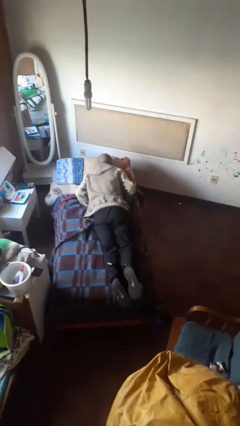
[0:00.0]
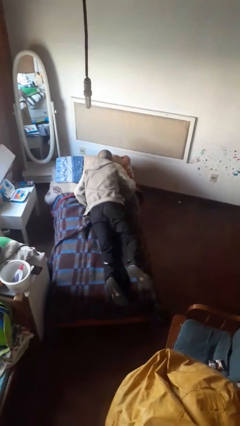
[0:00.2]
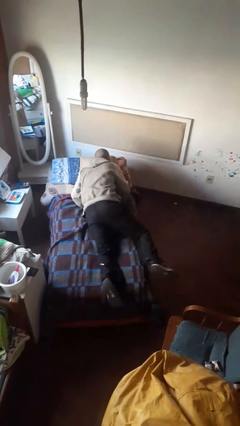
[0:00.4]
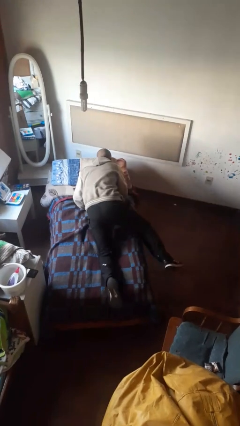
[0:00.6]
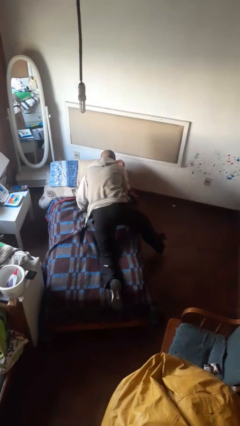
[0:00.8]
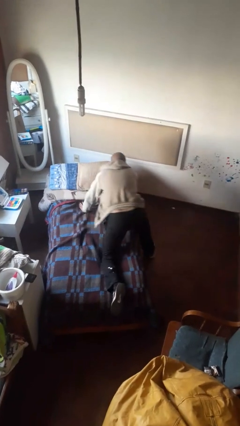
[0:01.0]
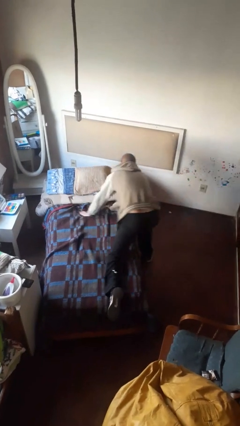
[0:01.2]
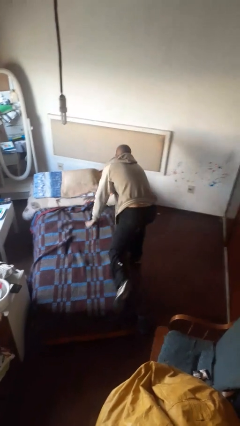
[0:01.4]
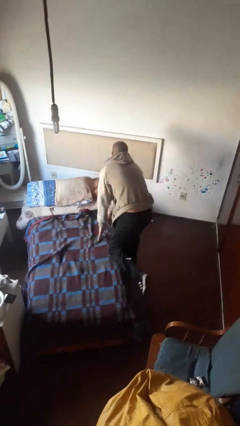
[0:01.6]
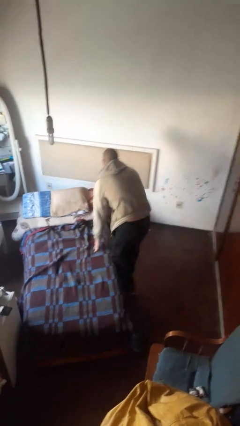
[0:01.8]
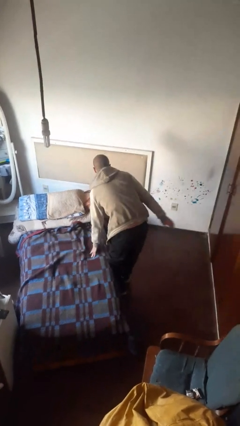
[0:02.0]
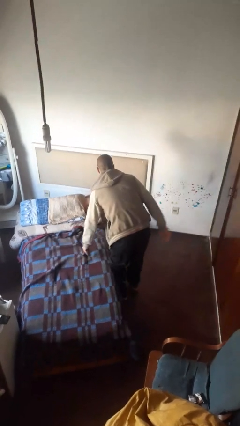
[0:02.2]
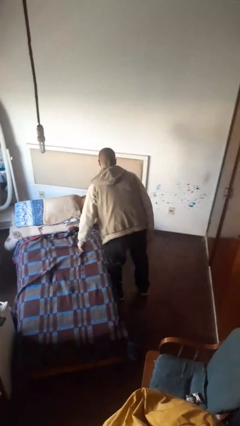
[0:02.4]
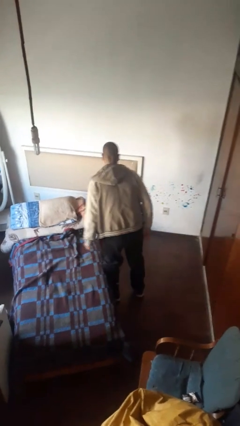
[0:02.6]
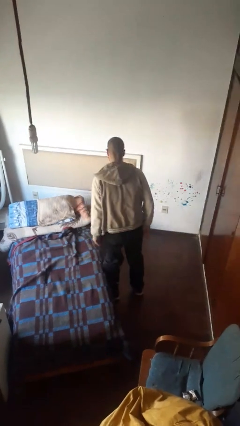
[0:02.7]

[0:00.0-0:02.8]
person stands up

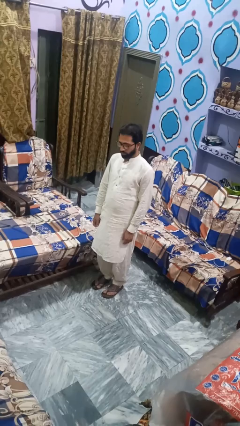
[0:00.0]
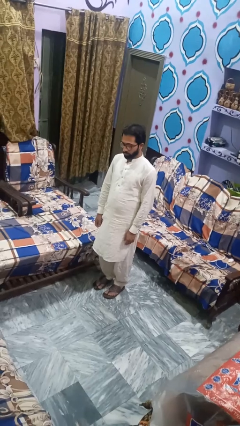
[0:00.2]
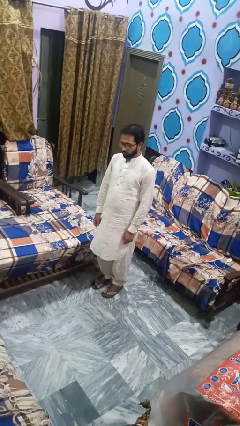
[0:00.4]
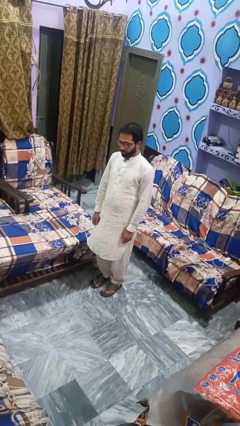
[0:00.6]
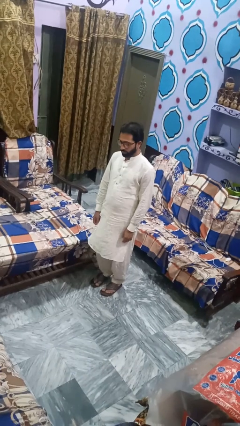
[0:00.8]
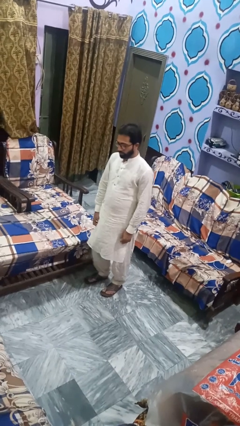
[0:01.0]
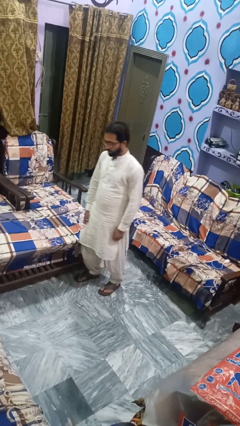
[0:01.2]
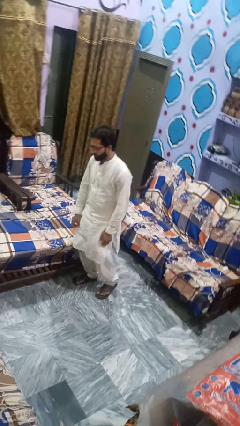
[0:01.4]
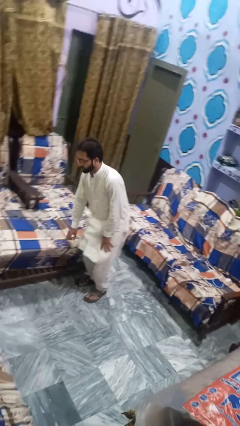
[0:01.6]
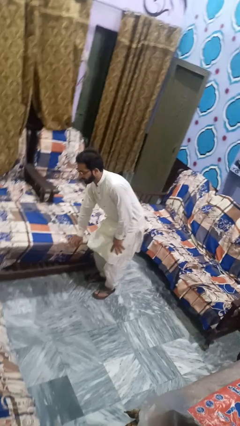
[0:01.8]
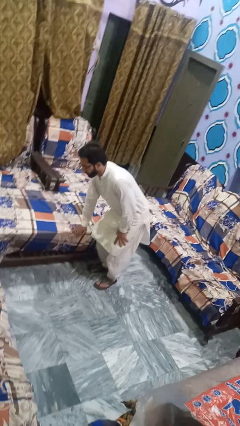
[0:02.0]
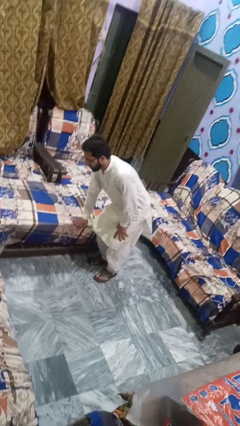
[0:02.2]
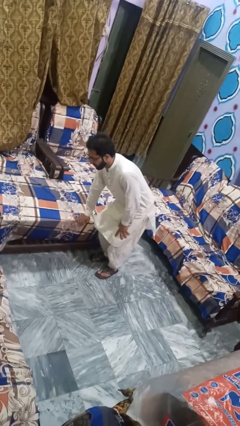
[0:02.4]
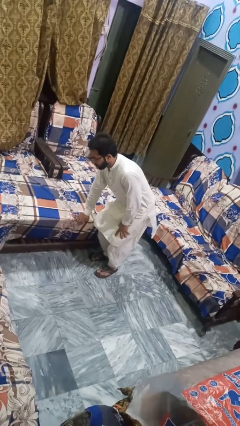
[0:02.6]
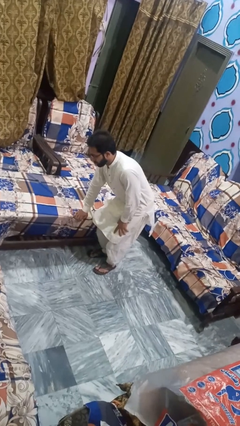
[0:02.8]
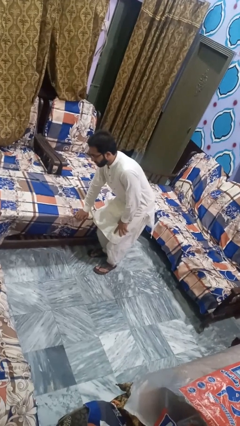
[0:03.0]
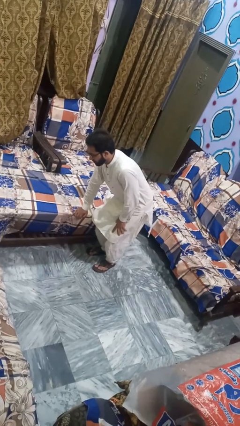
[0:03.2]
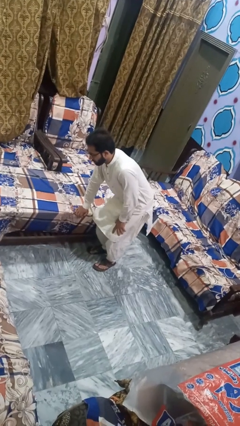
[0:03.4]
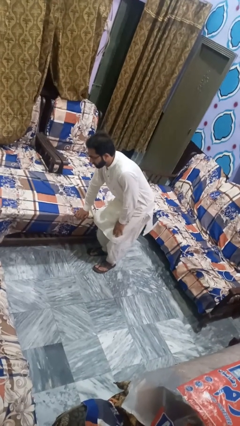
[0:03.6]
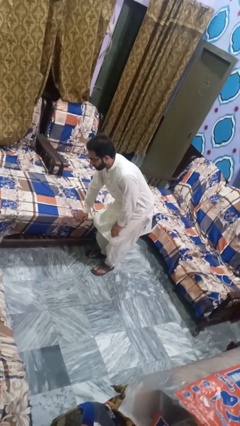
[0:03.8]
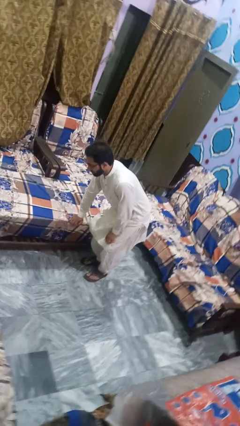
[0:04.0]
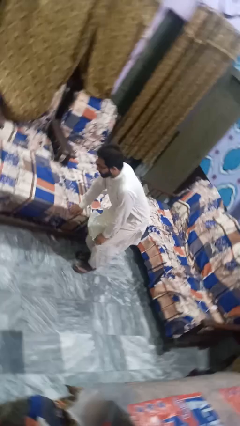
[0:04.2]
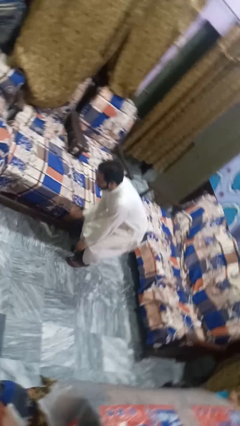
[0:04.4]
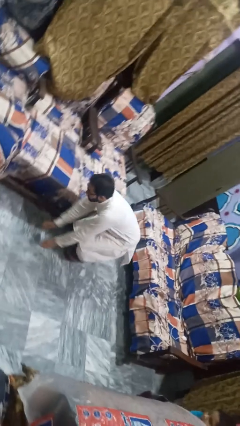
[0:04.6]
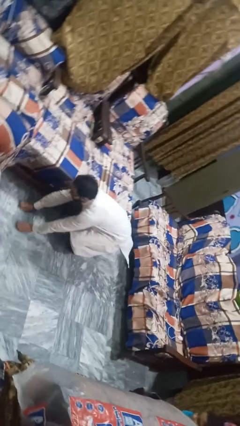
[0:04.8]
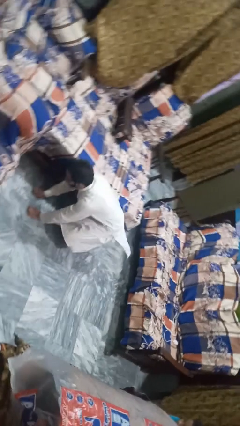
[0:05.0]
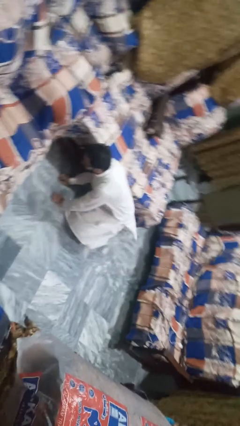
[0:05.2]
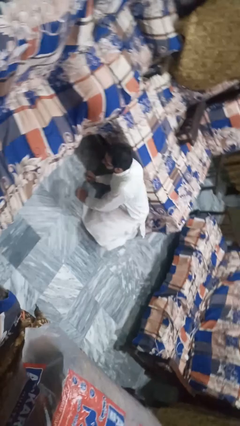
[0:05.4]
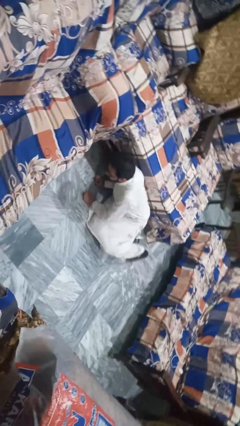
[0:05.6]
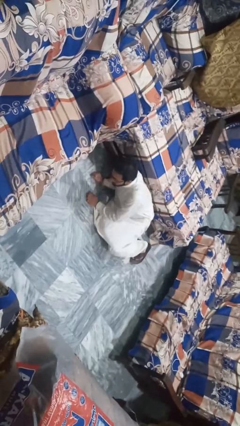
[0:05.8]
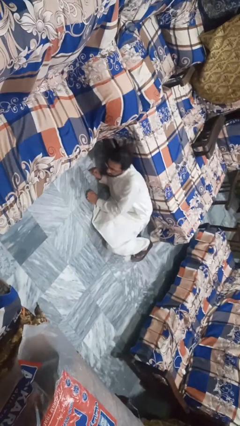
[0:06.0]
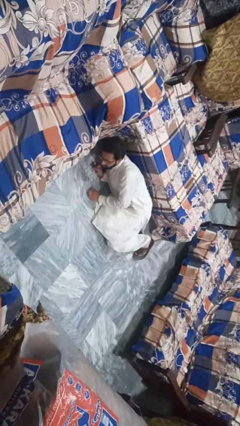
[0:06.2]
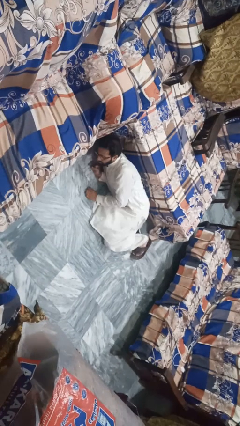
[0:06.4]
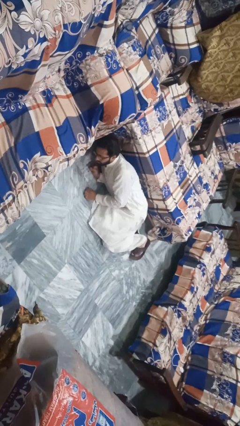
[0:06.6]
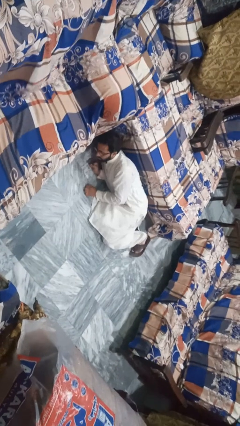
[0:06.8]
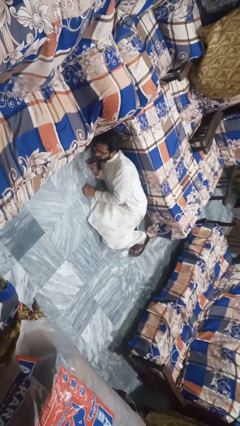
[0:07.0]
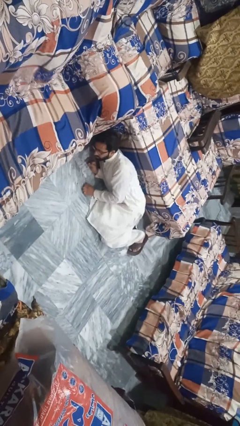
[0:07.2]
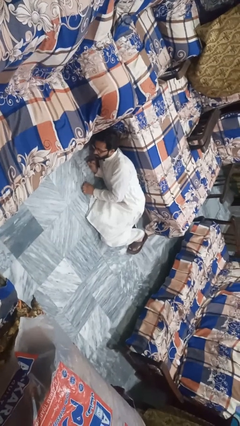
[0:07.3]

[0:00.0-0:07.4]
person trips on object on floor

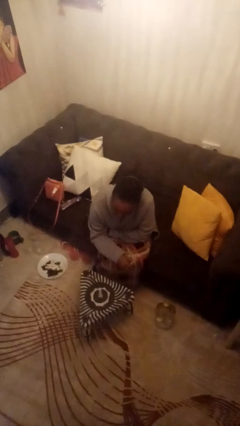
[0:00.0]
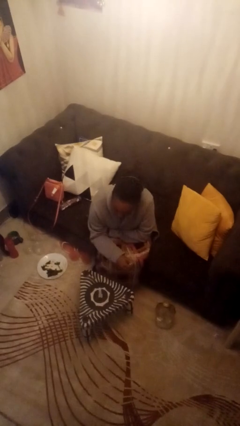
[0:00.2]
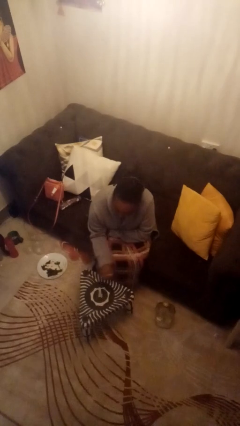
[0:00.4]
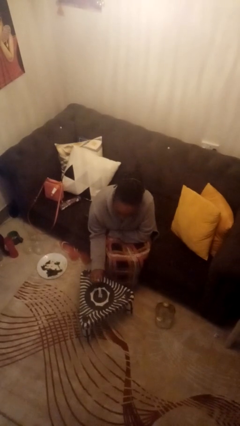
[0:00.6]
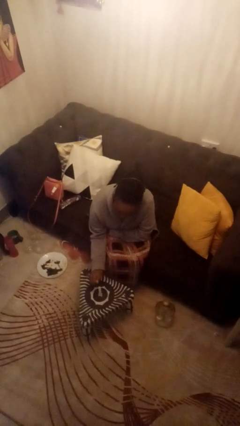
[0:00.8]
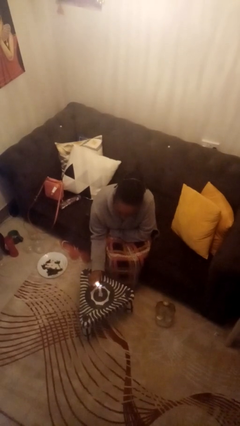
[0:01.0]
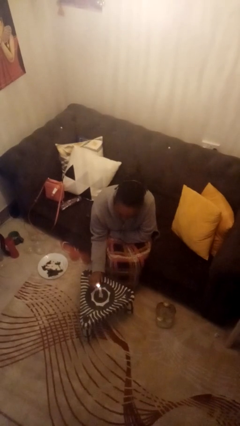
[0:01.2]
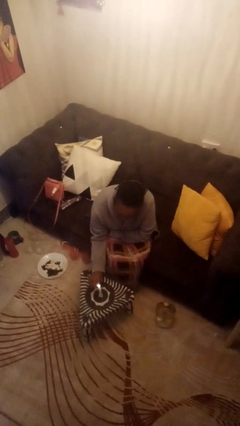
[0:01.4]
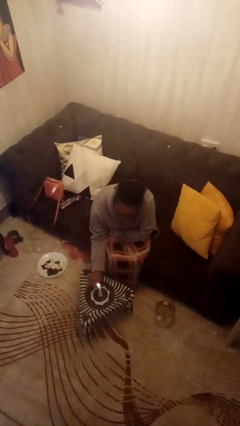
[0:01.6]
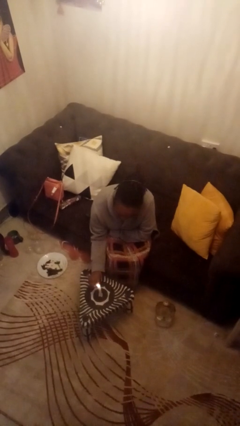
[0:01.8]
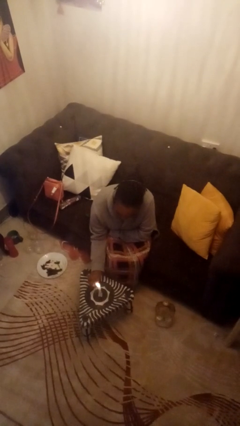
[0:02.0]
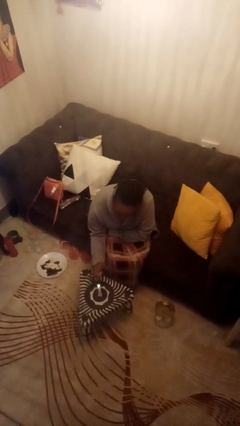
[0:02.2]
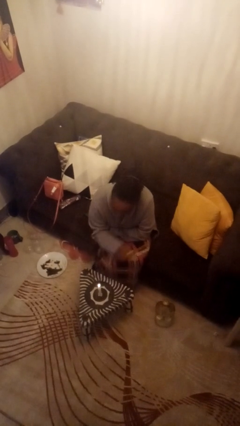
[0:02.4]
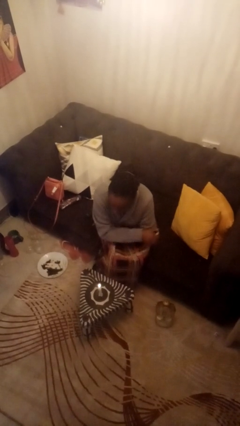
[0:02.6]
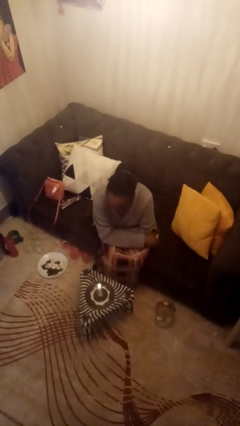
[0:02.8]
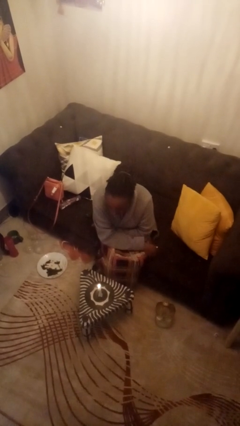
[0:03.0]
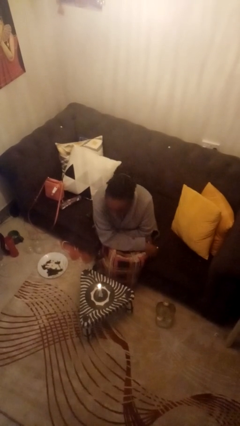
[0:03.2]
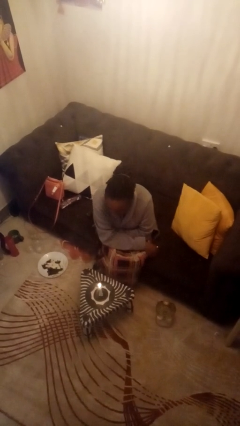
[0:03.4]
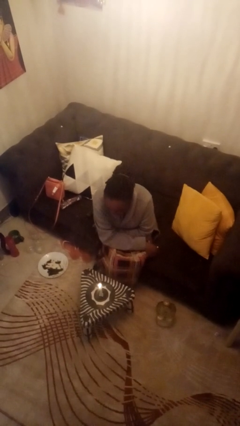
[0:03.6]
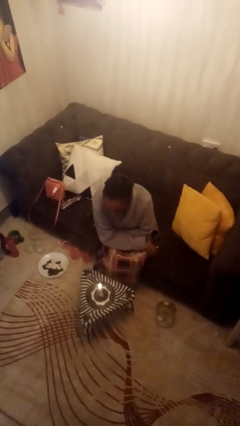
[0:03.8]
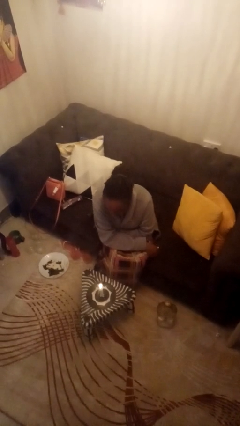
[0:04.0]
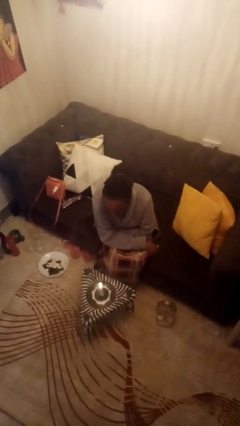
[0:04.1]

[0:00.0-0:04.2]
person lights candle

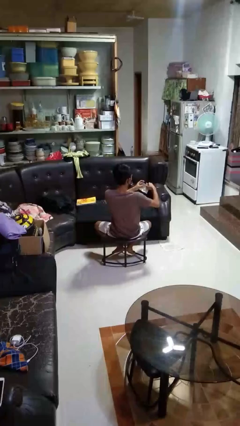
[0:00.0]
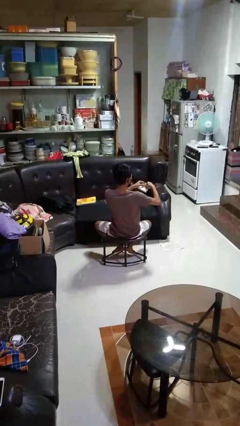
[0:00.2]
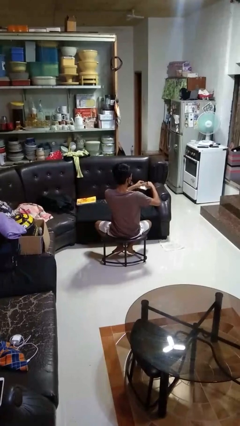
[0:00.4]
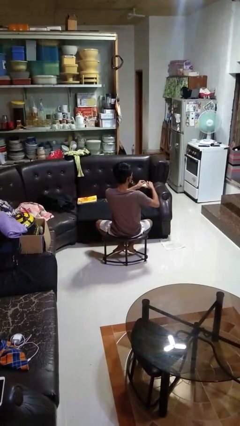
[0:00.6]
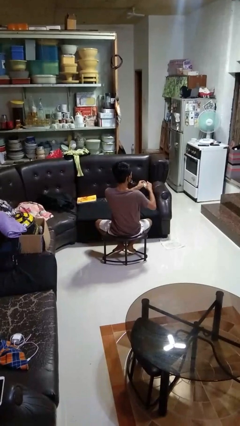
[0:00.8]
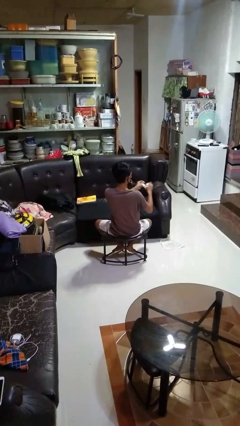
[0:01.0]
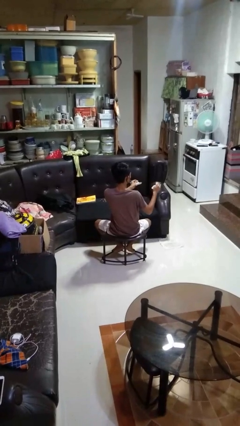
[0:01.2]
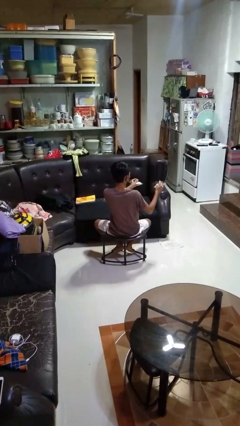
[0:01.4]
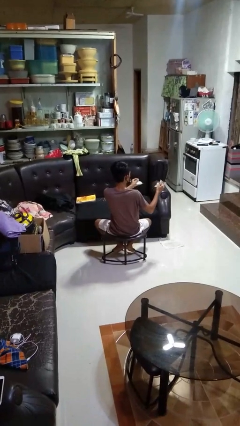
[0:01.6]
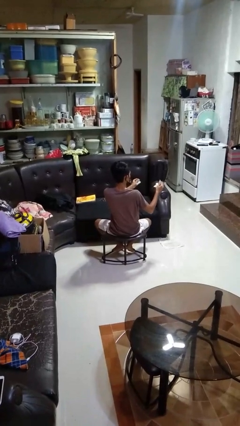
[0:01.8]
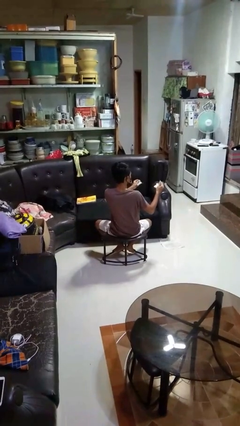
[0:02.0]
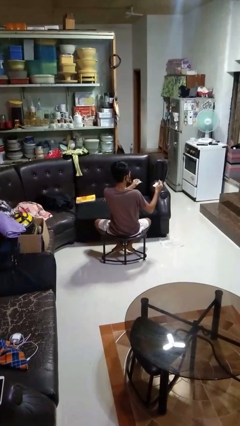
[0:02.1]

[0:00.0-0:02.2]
person tears paper

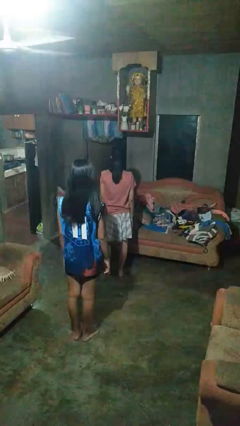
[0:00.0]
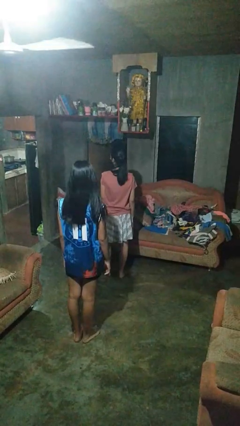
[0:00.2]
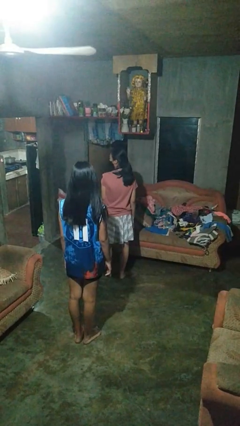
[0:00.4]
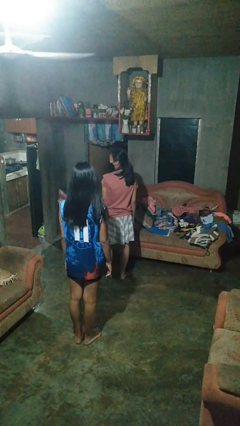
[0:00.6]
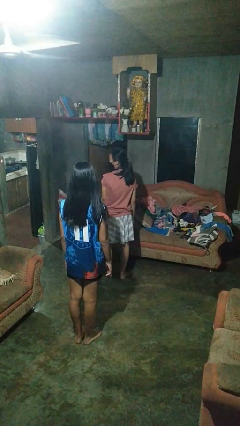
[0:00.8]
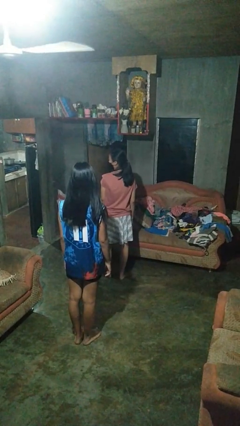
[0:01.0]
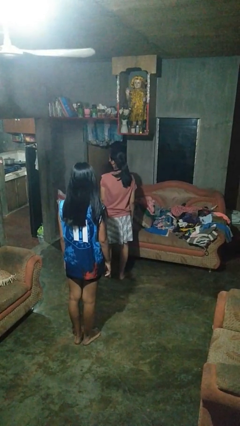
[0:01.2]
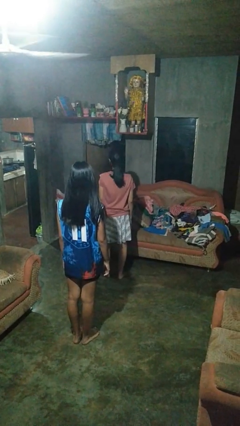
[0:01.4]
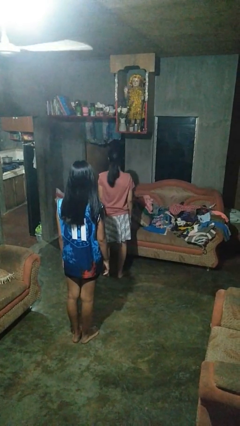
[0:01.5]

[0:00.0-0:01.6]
person looks over shoulder
